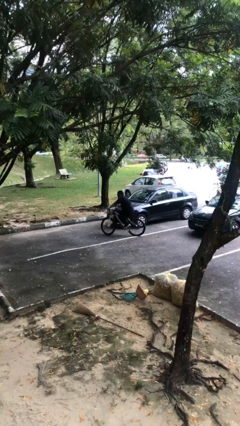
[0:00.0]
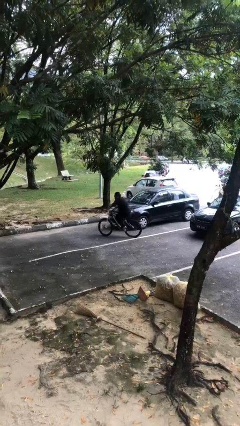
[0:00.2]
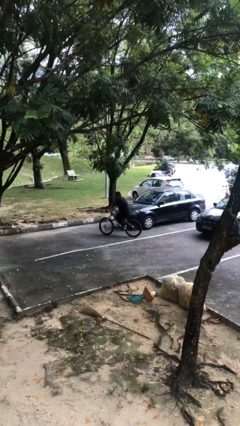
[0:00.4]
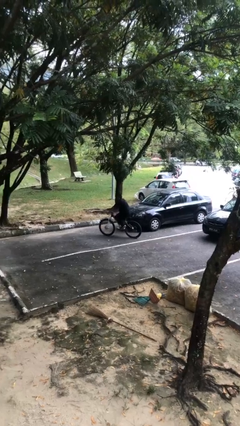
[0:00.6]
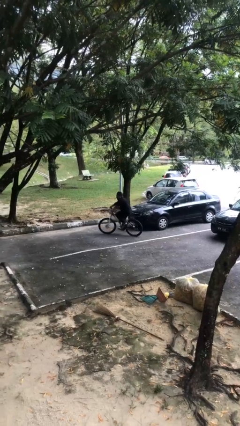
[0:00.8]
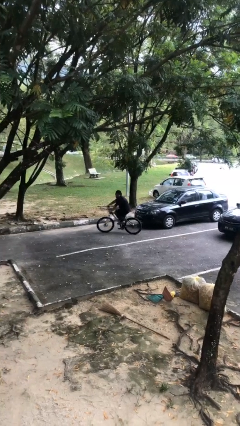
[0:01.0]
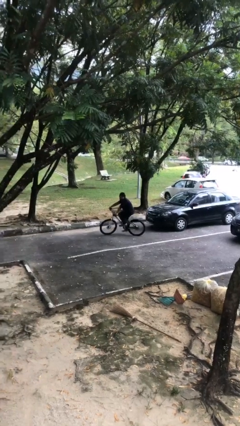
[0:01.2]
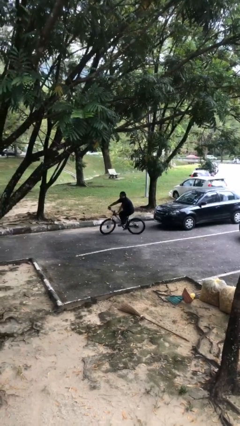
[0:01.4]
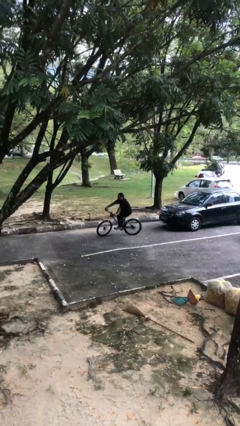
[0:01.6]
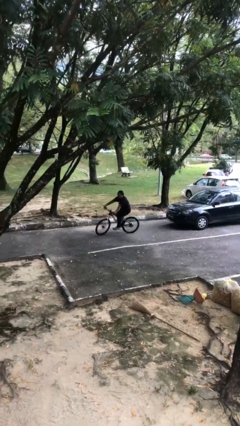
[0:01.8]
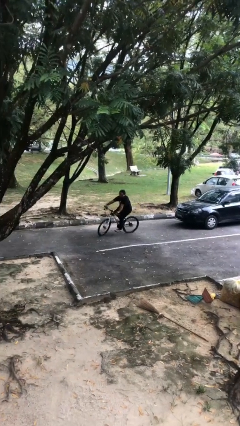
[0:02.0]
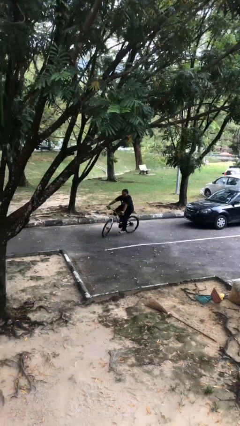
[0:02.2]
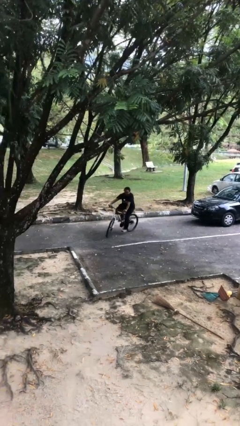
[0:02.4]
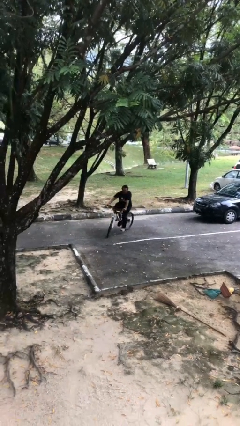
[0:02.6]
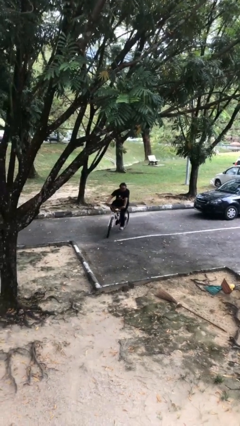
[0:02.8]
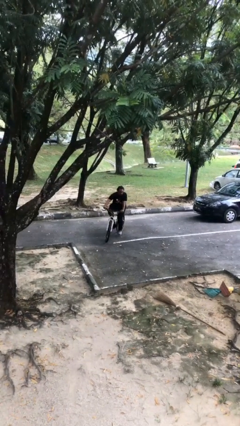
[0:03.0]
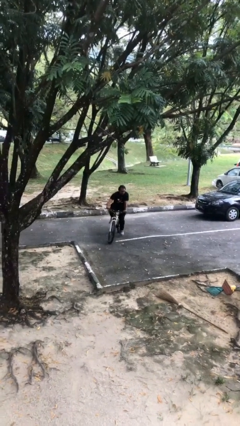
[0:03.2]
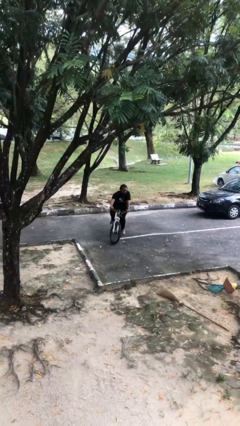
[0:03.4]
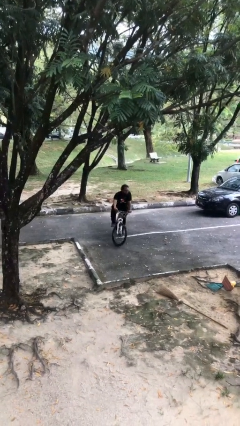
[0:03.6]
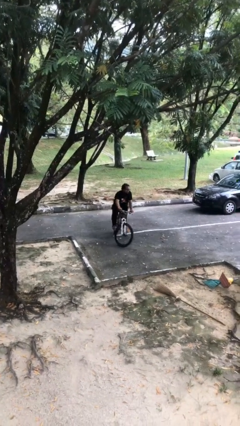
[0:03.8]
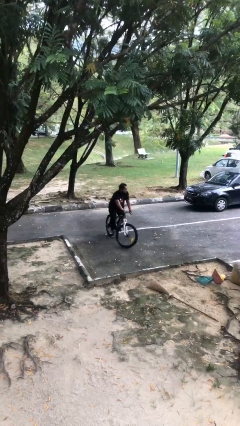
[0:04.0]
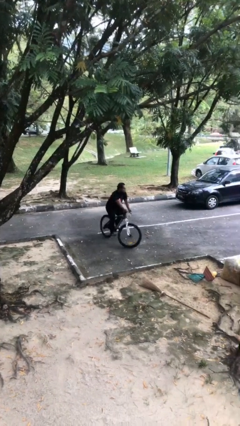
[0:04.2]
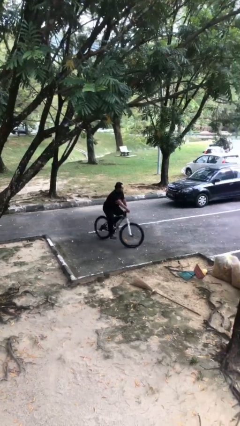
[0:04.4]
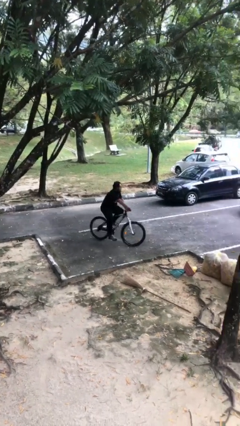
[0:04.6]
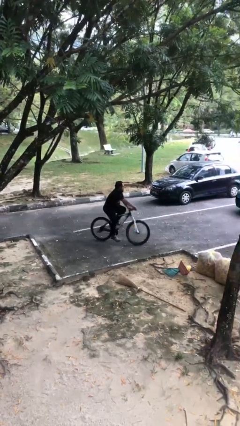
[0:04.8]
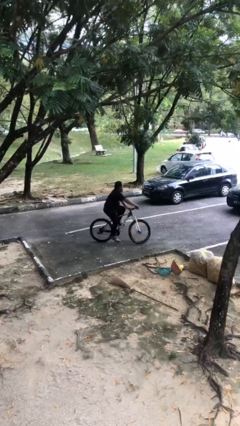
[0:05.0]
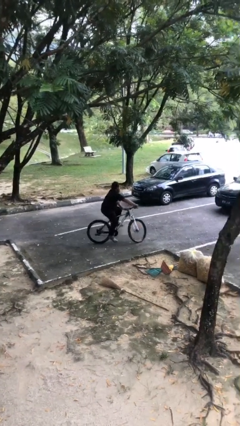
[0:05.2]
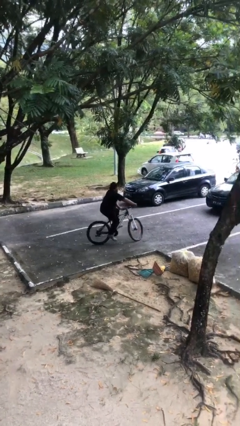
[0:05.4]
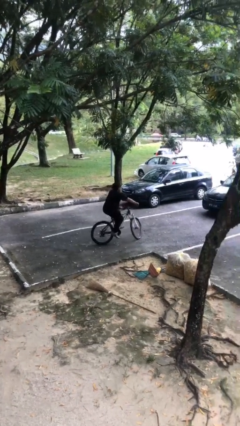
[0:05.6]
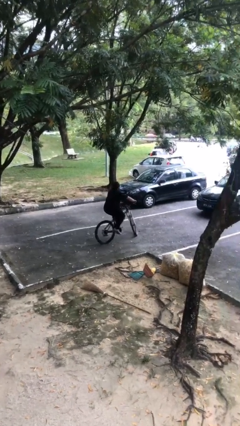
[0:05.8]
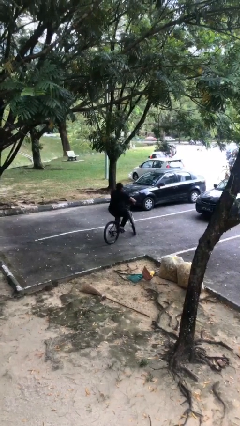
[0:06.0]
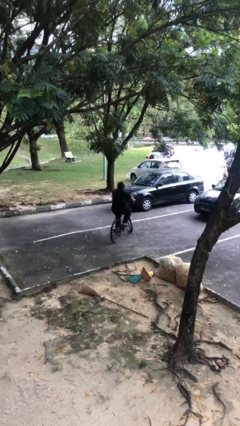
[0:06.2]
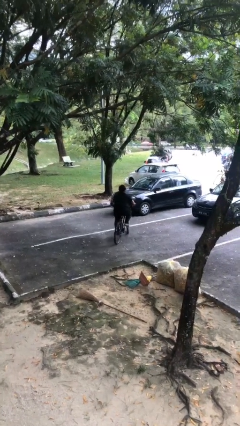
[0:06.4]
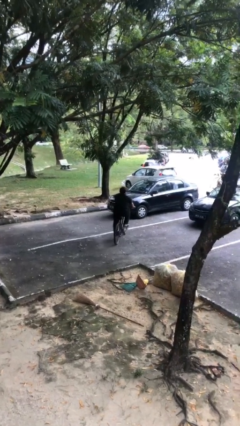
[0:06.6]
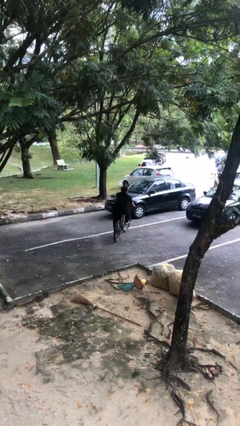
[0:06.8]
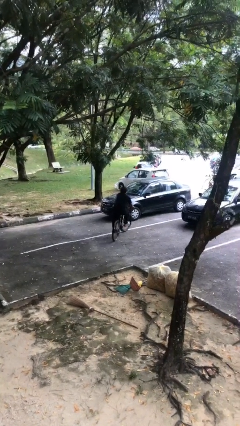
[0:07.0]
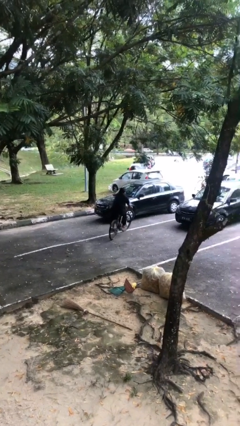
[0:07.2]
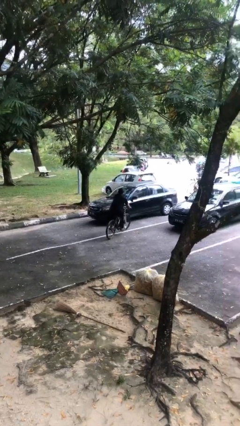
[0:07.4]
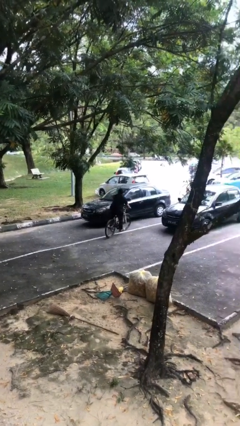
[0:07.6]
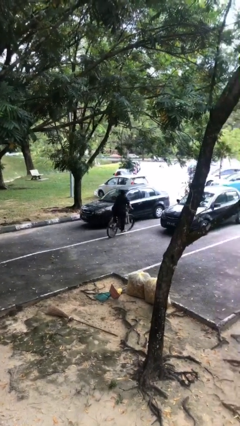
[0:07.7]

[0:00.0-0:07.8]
person rides bicycle

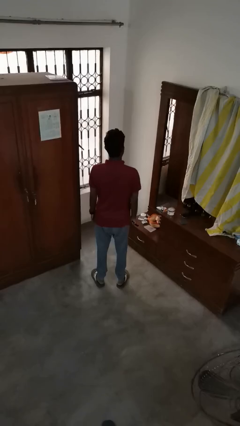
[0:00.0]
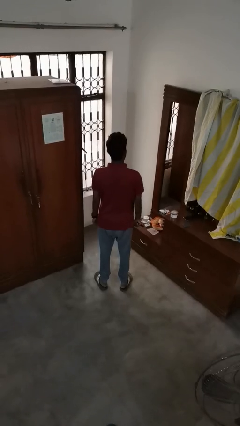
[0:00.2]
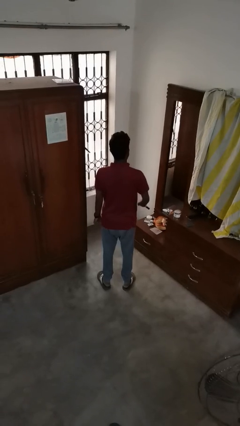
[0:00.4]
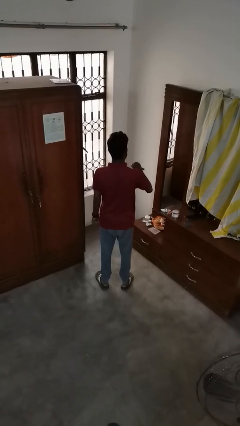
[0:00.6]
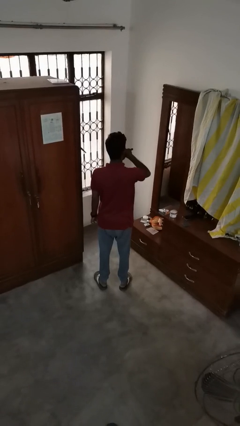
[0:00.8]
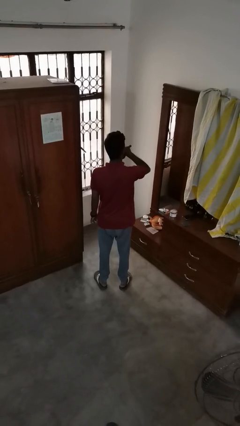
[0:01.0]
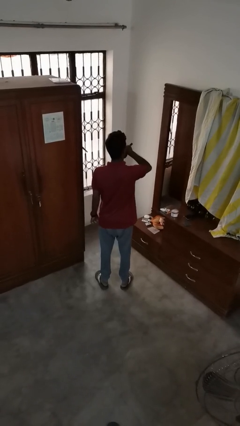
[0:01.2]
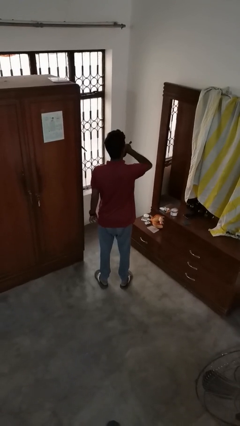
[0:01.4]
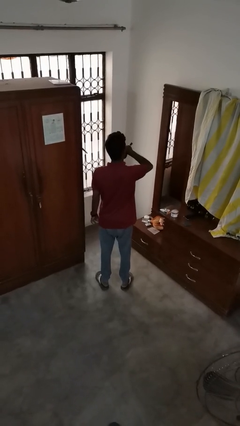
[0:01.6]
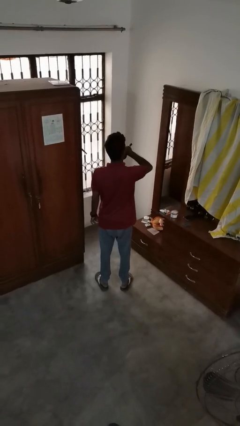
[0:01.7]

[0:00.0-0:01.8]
person vapes

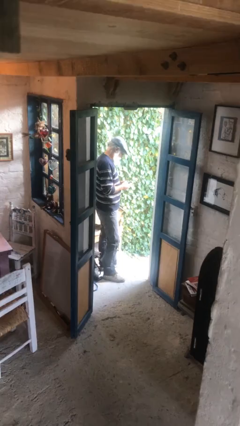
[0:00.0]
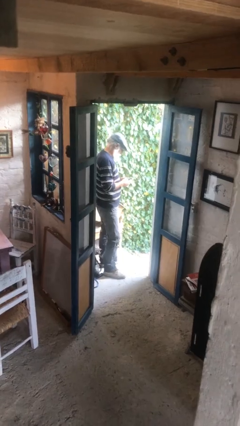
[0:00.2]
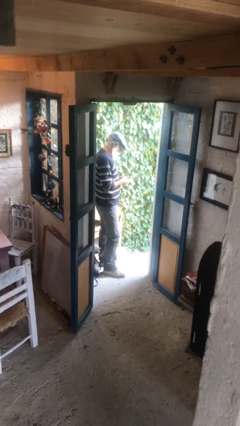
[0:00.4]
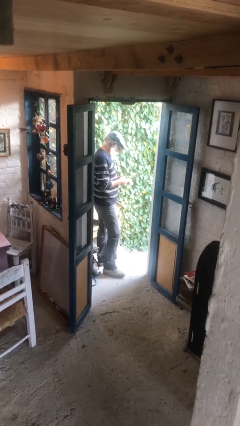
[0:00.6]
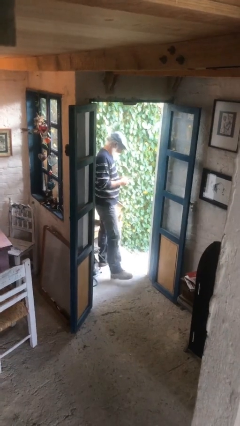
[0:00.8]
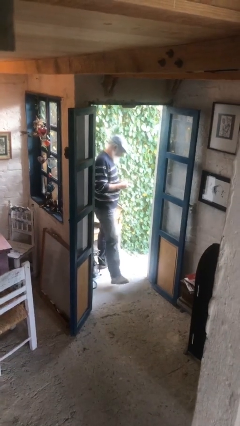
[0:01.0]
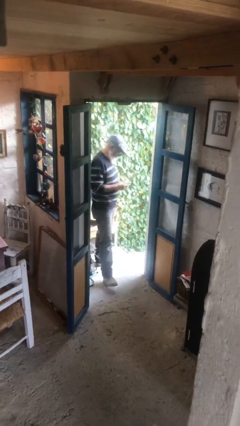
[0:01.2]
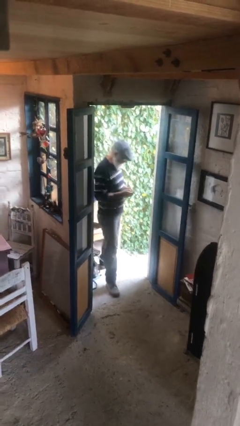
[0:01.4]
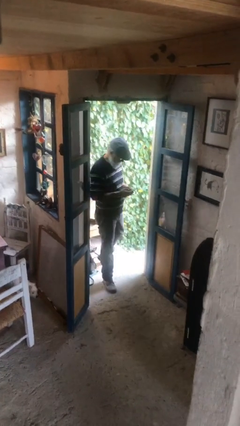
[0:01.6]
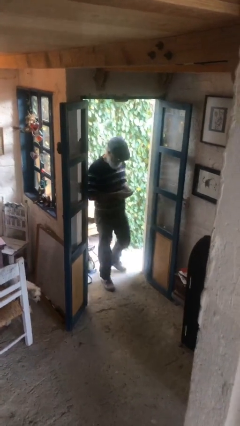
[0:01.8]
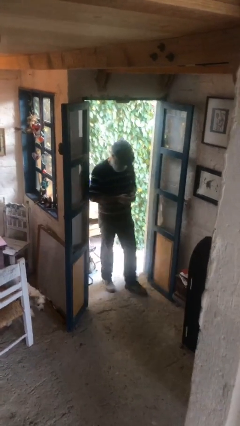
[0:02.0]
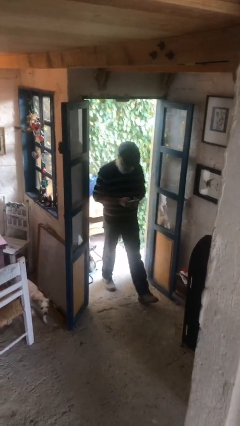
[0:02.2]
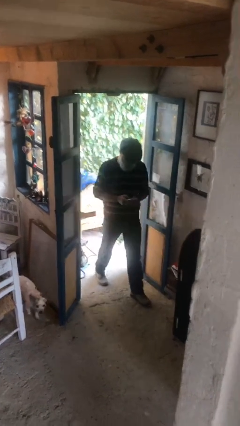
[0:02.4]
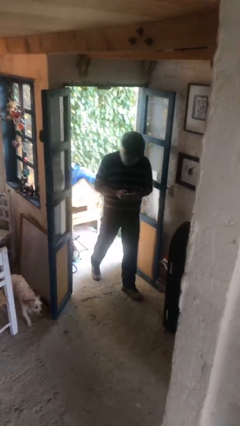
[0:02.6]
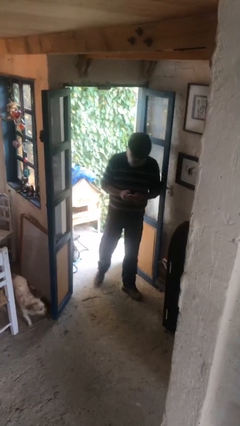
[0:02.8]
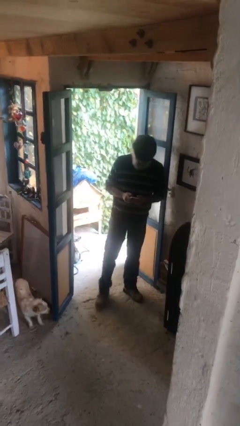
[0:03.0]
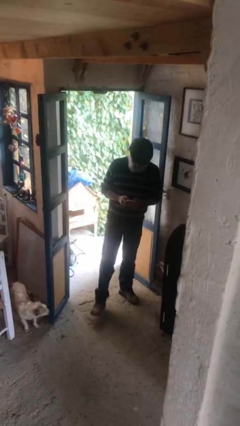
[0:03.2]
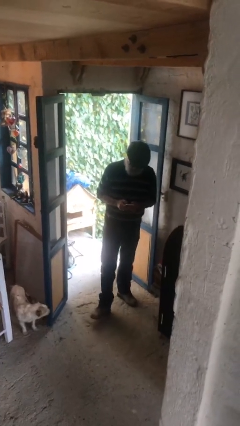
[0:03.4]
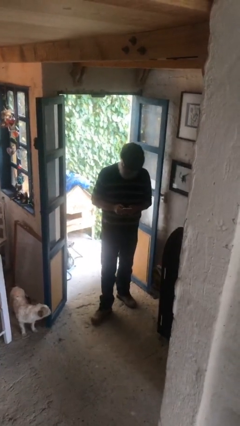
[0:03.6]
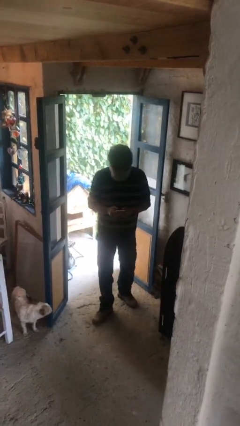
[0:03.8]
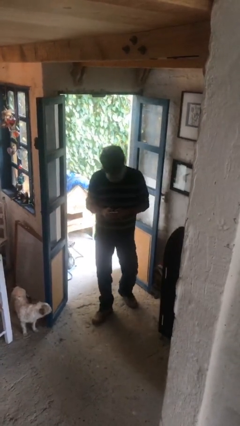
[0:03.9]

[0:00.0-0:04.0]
person enters scene through structure

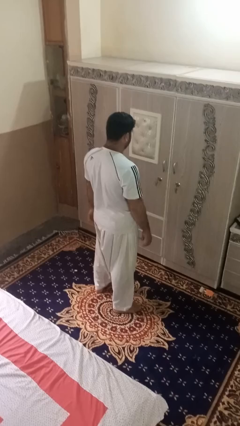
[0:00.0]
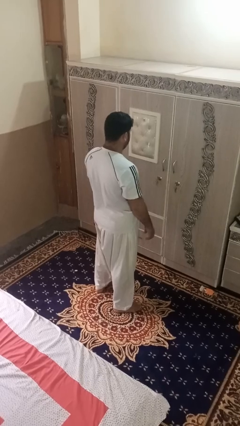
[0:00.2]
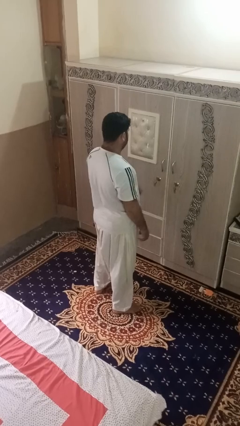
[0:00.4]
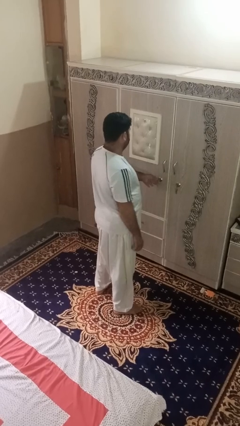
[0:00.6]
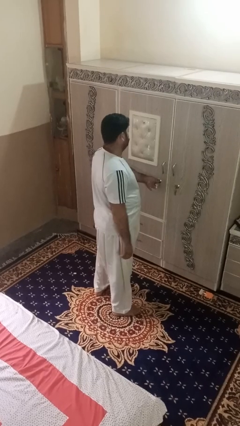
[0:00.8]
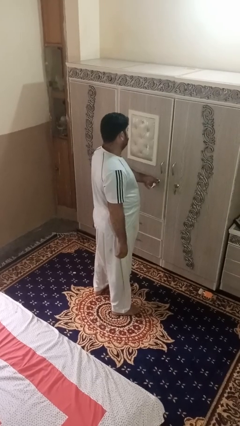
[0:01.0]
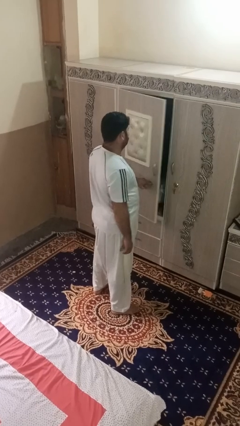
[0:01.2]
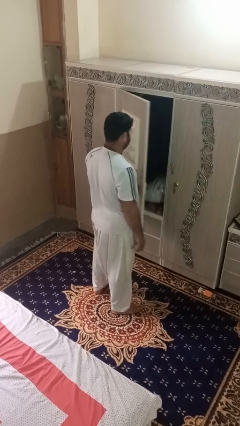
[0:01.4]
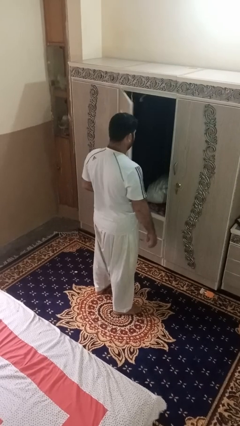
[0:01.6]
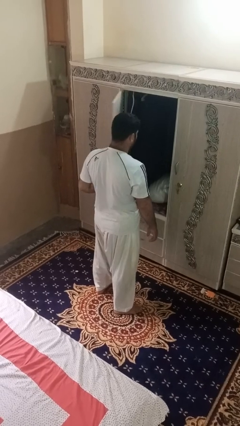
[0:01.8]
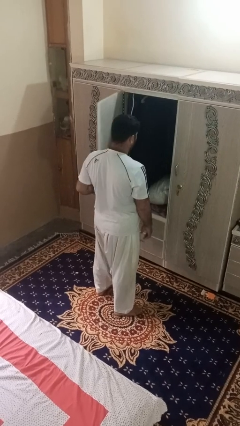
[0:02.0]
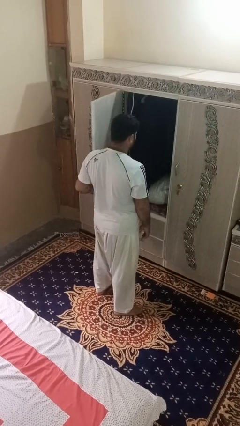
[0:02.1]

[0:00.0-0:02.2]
person opens dresser drawer

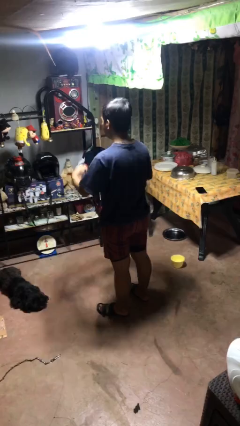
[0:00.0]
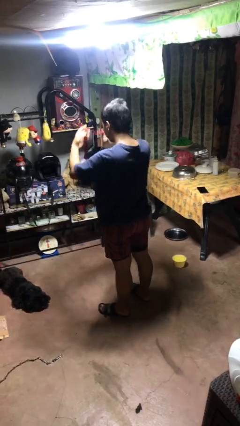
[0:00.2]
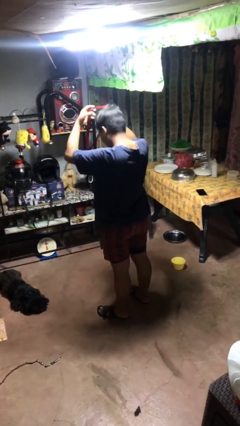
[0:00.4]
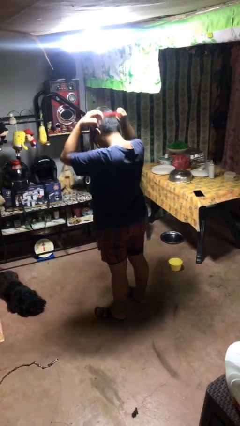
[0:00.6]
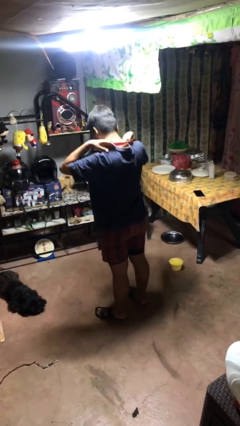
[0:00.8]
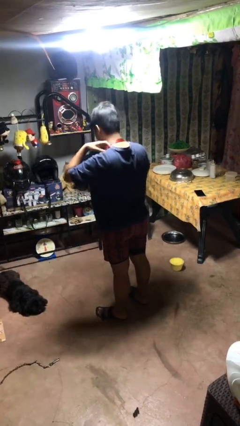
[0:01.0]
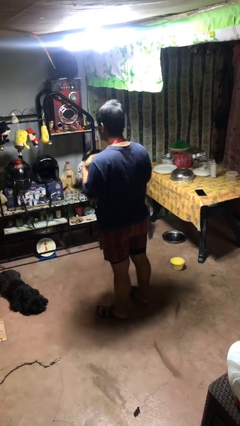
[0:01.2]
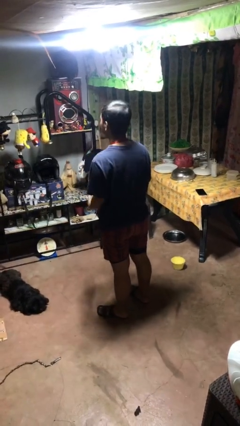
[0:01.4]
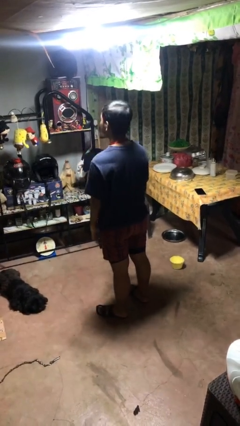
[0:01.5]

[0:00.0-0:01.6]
person puts on necklace

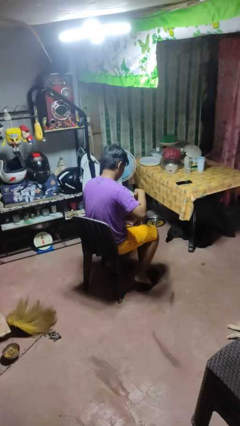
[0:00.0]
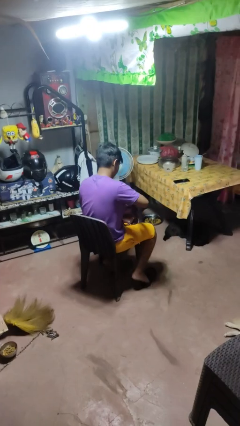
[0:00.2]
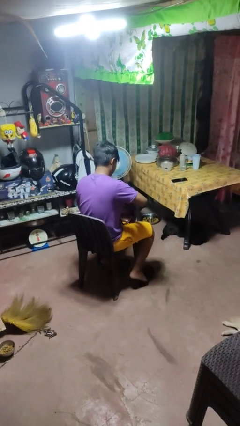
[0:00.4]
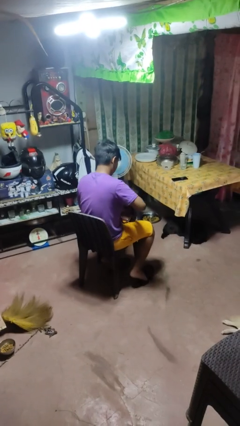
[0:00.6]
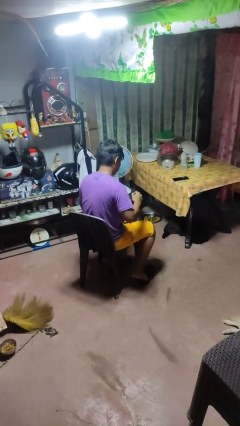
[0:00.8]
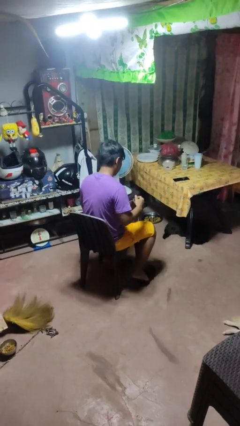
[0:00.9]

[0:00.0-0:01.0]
person puts object into purse
